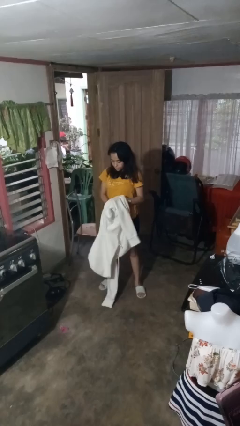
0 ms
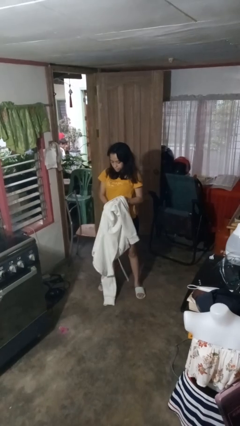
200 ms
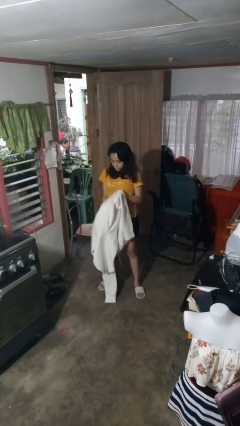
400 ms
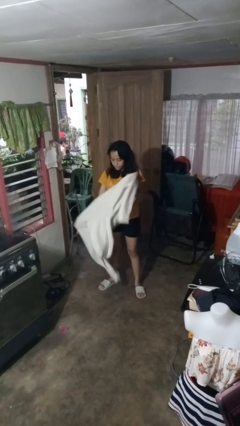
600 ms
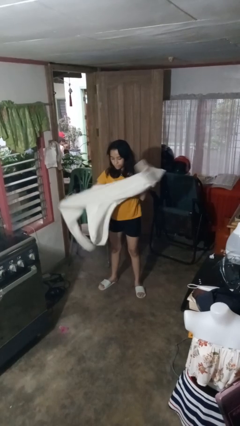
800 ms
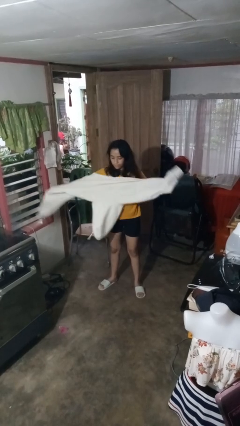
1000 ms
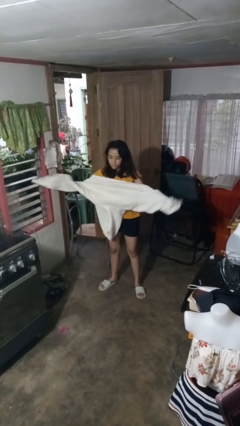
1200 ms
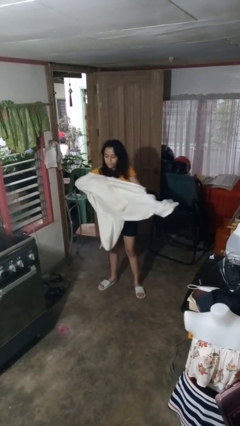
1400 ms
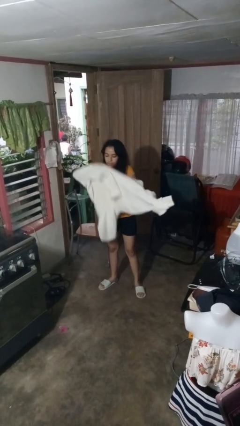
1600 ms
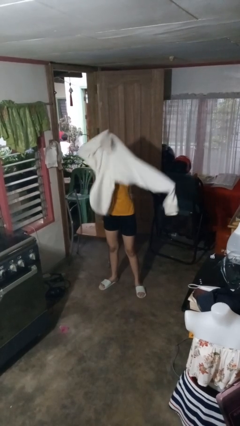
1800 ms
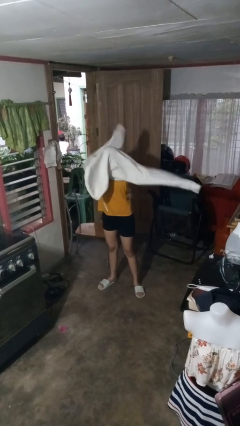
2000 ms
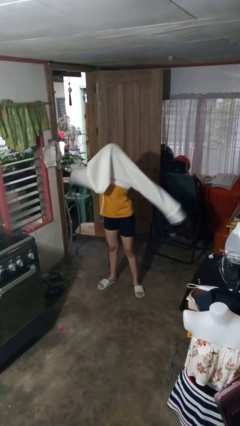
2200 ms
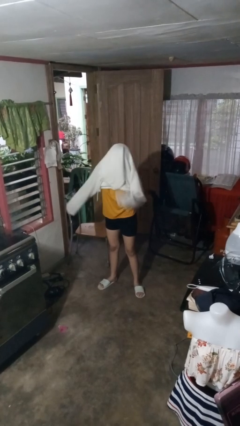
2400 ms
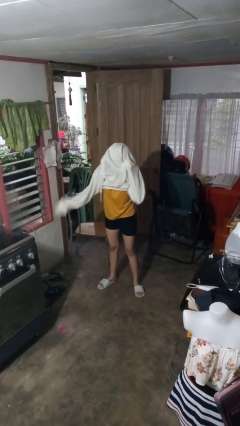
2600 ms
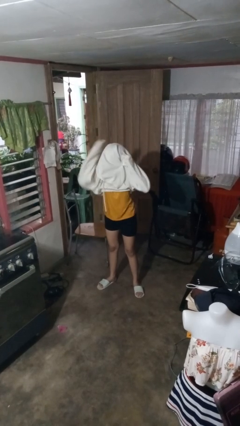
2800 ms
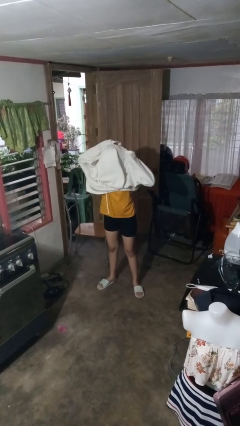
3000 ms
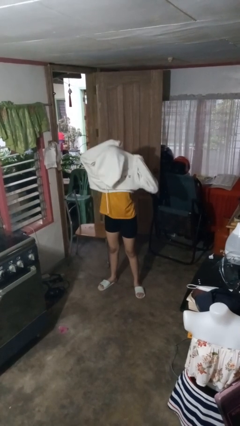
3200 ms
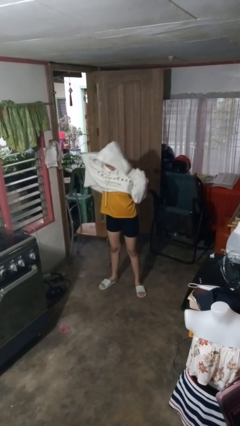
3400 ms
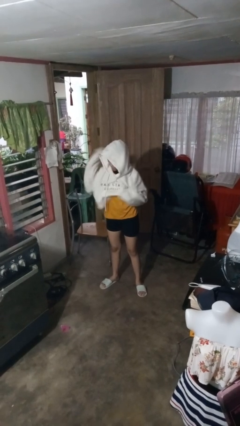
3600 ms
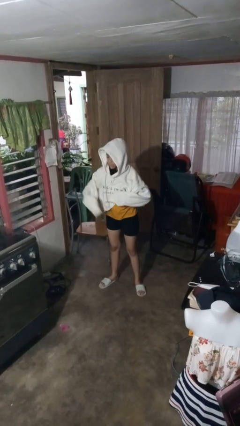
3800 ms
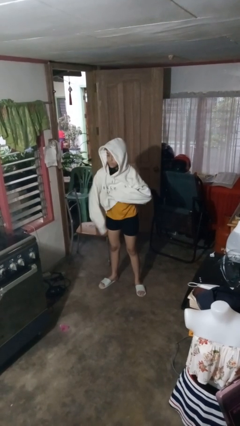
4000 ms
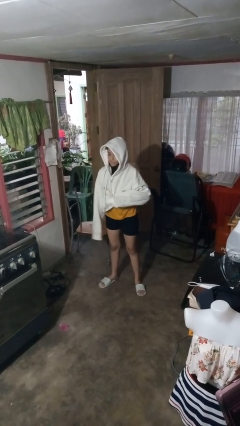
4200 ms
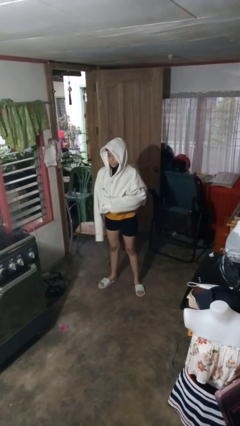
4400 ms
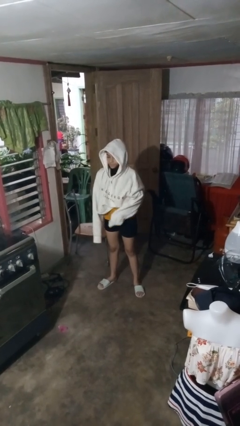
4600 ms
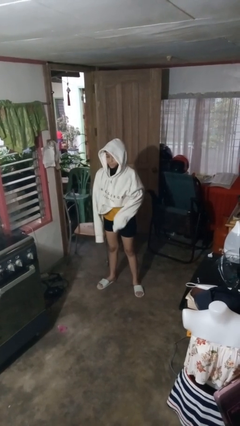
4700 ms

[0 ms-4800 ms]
person puts on hoodie

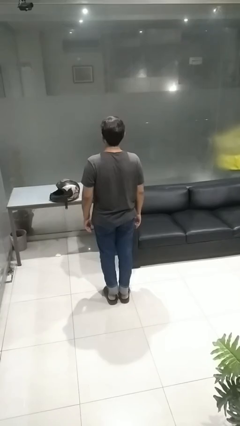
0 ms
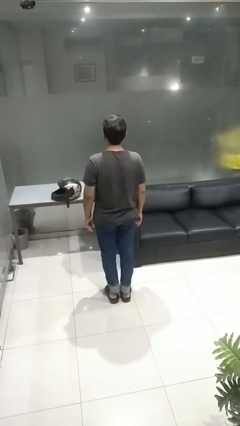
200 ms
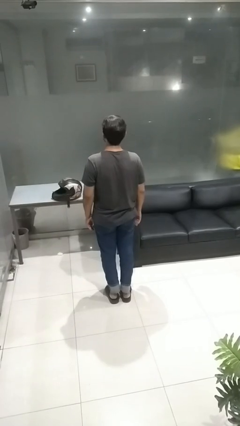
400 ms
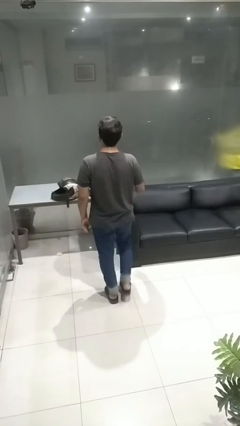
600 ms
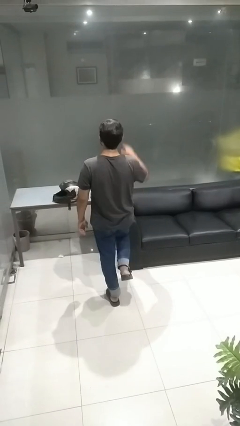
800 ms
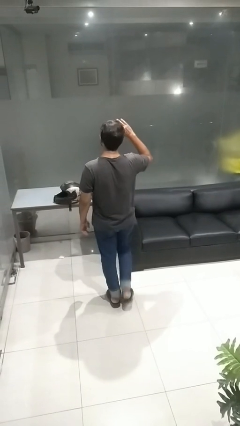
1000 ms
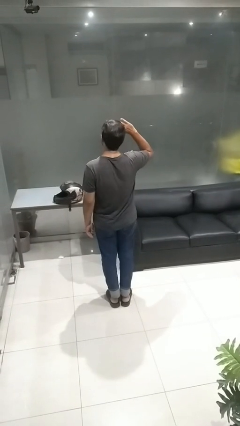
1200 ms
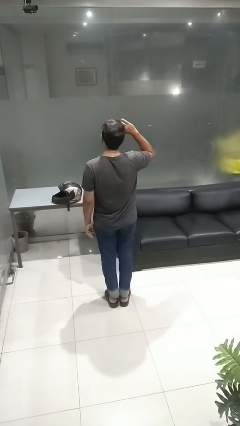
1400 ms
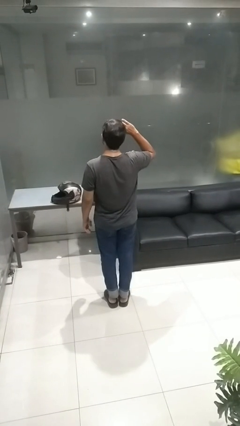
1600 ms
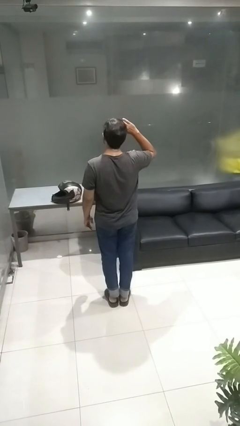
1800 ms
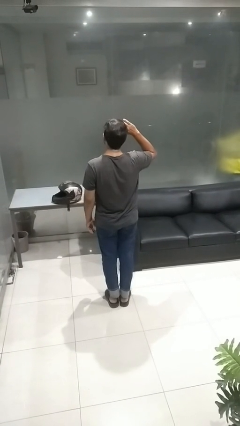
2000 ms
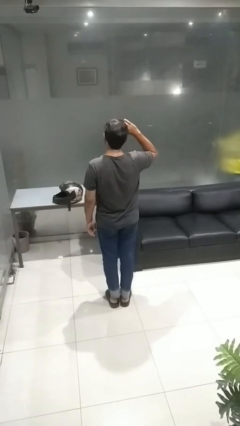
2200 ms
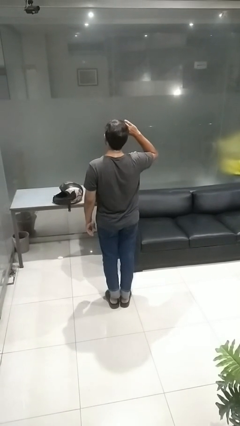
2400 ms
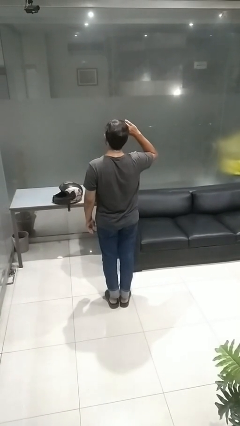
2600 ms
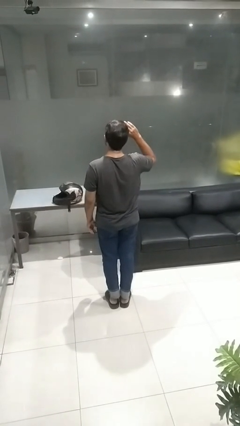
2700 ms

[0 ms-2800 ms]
person salutes

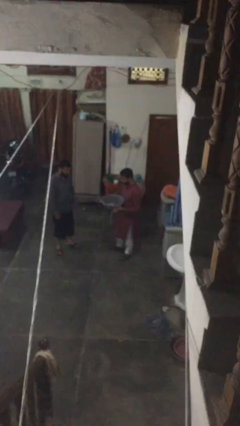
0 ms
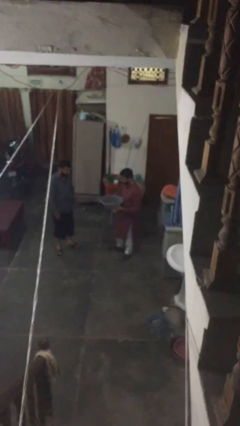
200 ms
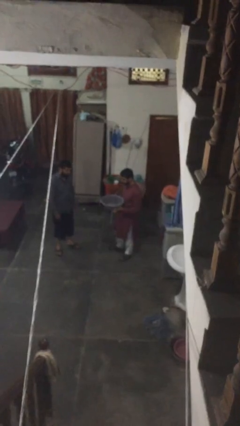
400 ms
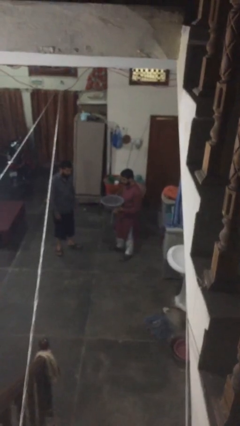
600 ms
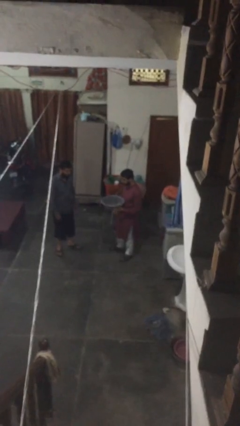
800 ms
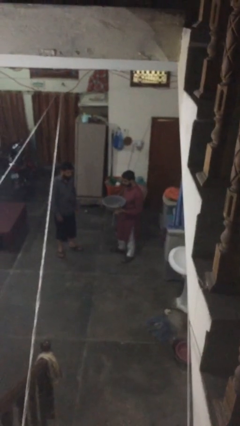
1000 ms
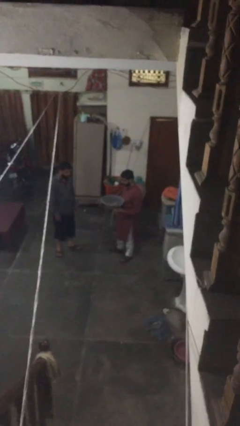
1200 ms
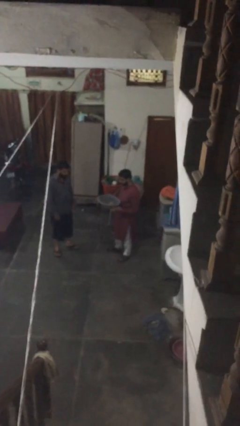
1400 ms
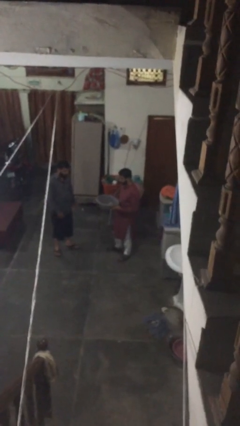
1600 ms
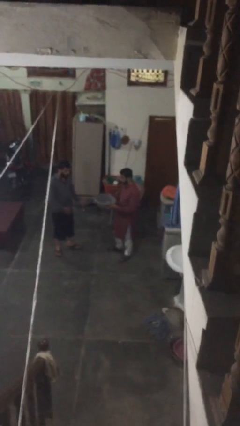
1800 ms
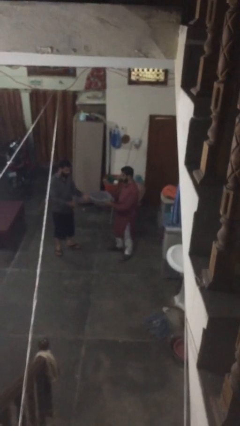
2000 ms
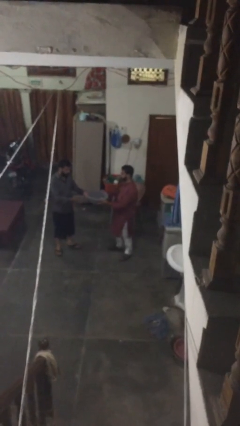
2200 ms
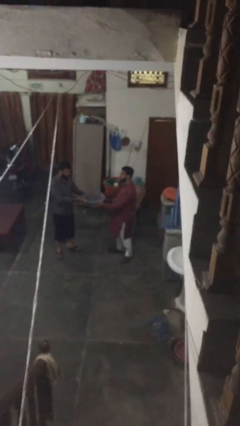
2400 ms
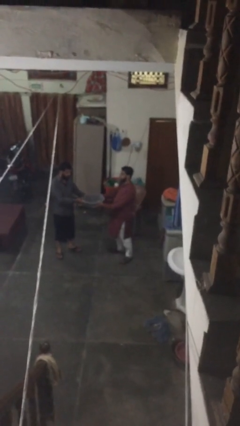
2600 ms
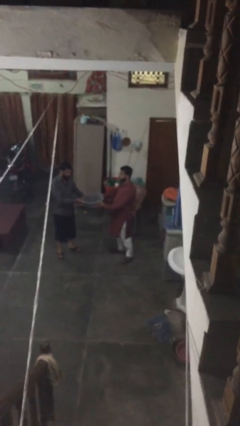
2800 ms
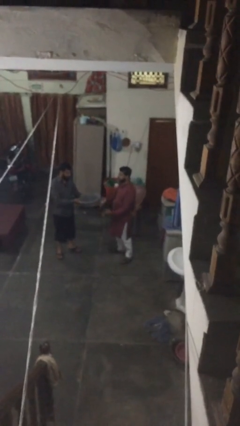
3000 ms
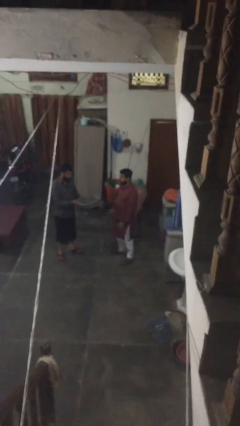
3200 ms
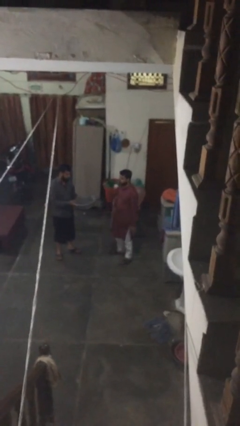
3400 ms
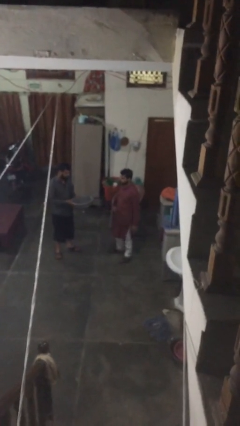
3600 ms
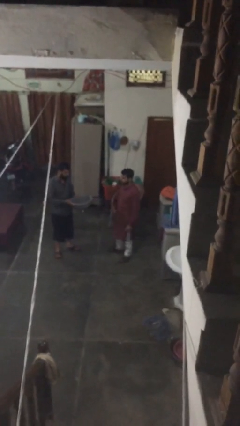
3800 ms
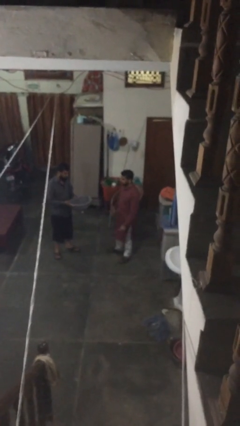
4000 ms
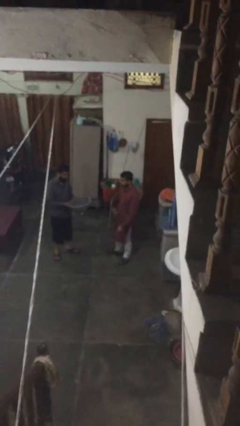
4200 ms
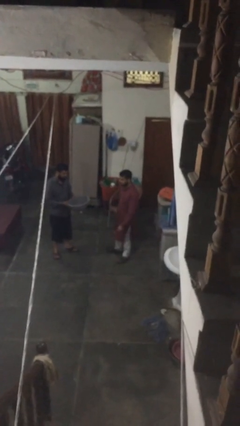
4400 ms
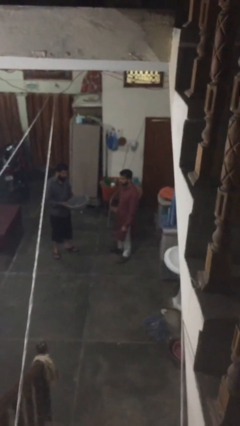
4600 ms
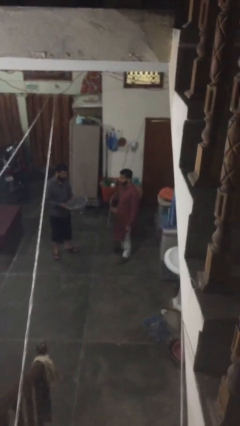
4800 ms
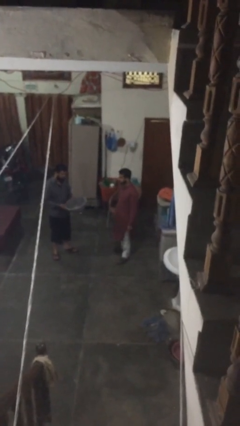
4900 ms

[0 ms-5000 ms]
person transfers object to person

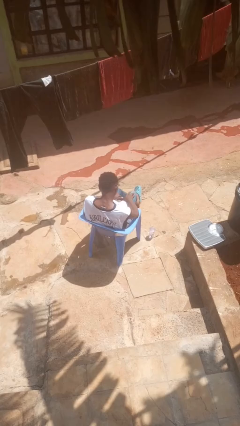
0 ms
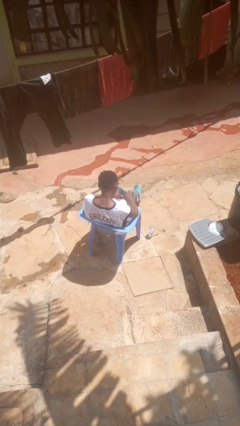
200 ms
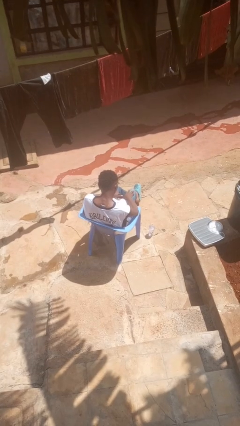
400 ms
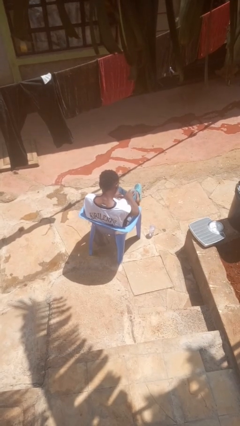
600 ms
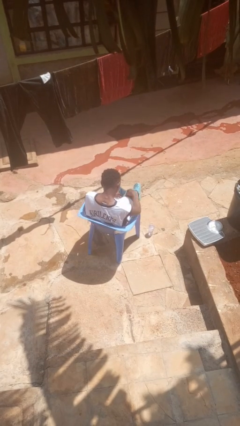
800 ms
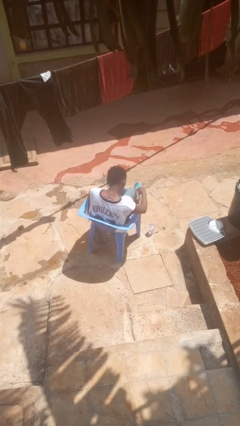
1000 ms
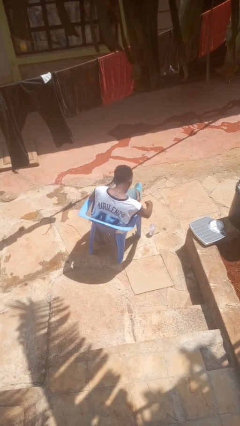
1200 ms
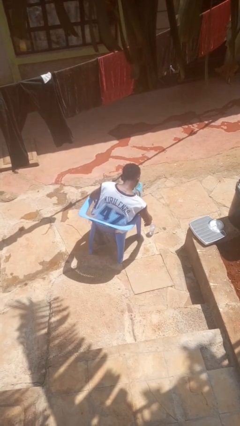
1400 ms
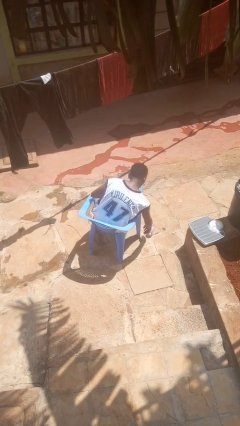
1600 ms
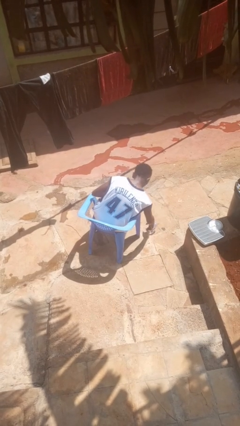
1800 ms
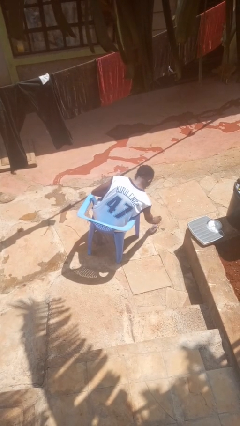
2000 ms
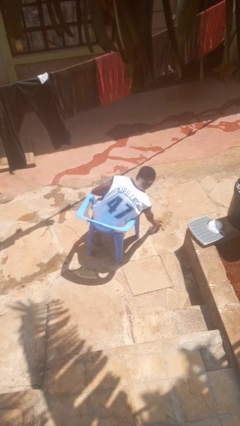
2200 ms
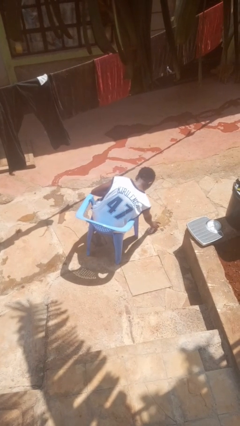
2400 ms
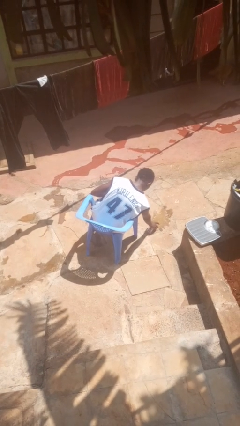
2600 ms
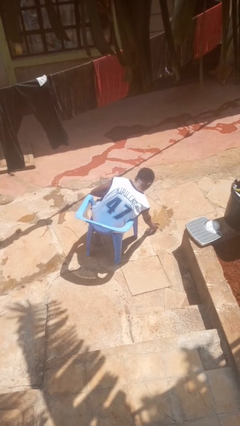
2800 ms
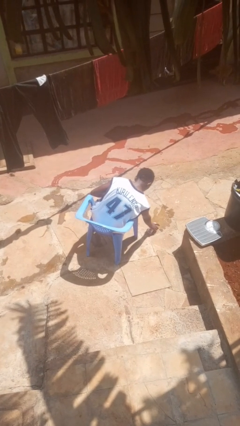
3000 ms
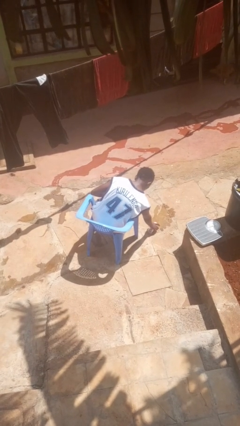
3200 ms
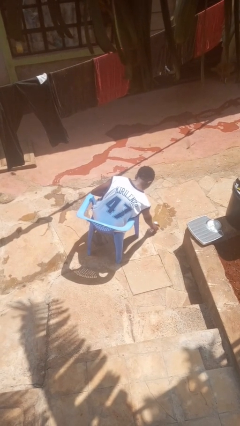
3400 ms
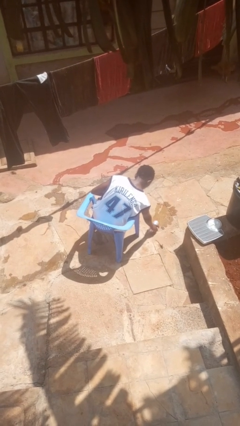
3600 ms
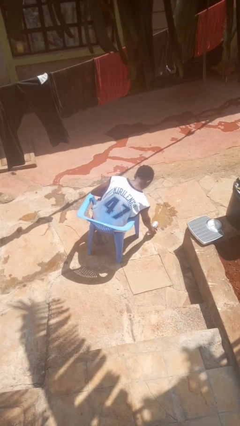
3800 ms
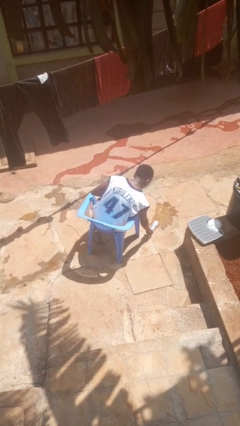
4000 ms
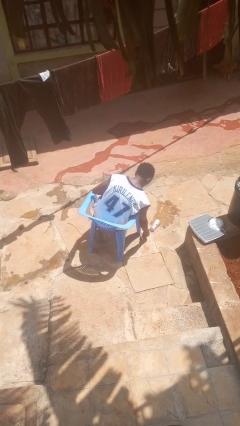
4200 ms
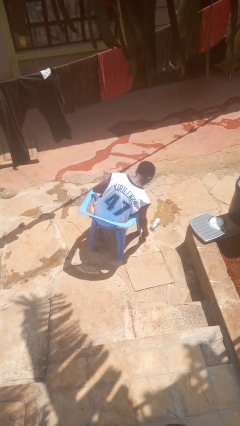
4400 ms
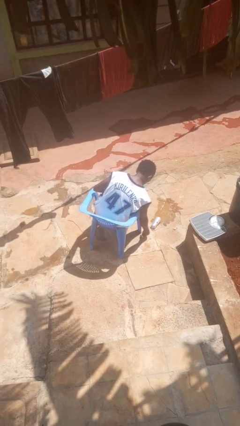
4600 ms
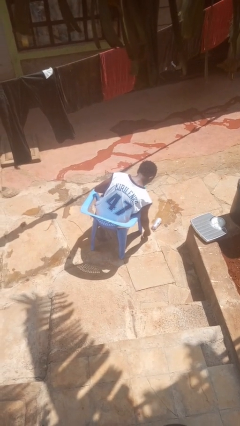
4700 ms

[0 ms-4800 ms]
person spills on floor
